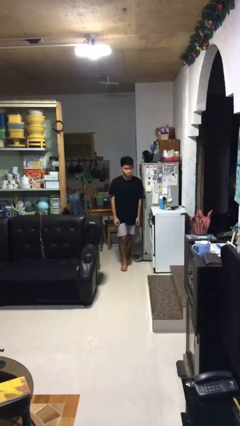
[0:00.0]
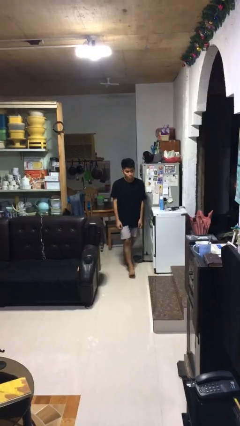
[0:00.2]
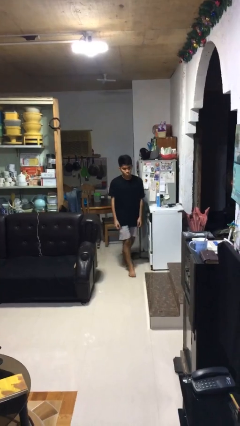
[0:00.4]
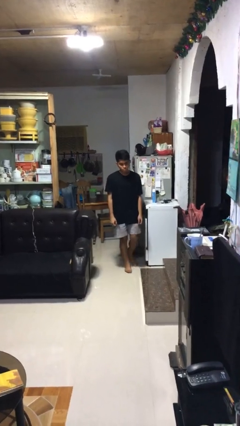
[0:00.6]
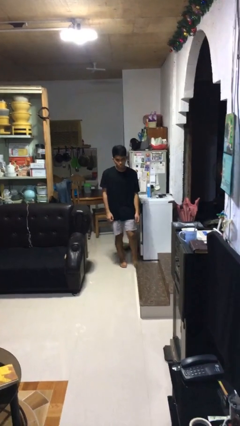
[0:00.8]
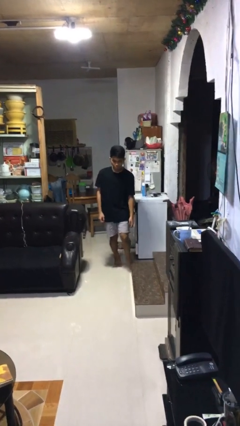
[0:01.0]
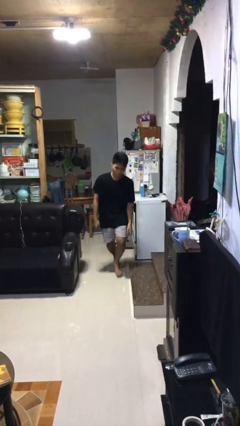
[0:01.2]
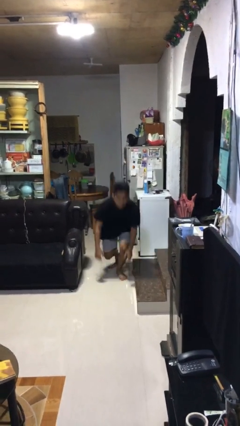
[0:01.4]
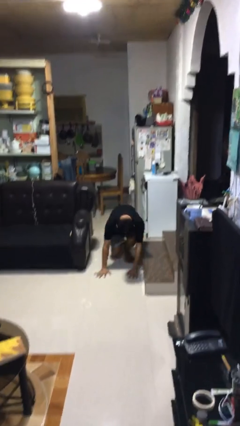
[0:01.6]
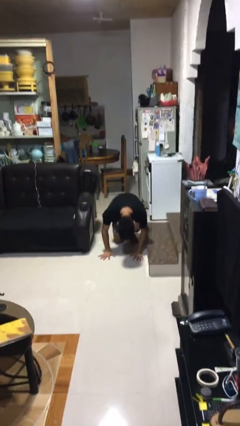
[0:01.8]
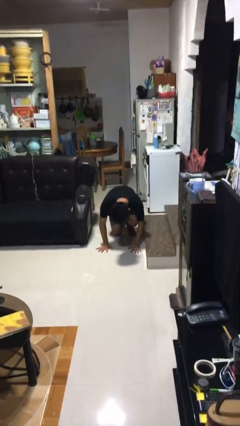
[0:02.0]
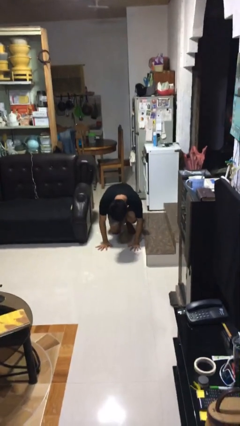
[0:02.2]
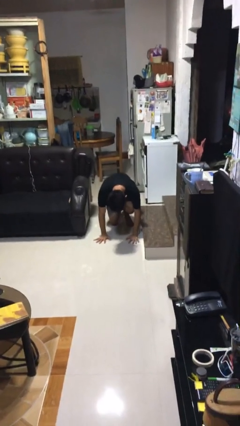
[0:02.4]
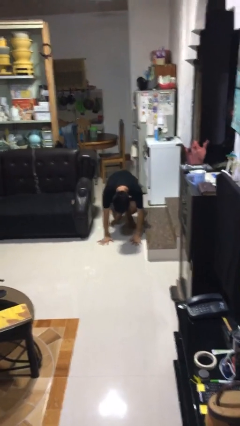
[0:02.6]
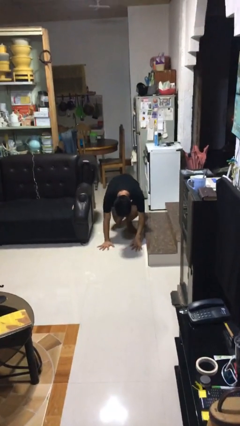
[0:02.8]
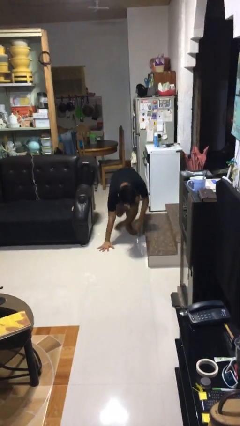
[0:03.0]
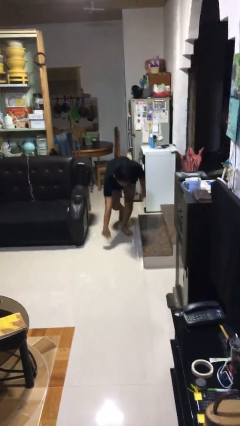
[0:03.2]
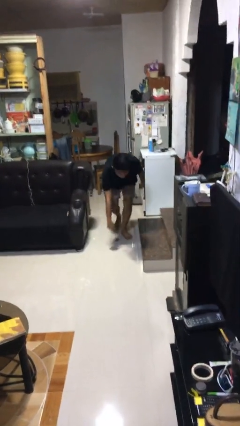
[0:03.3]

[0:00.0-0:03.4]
person trips on object on floor

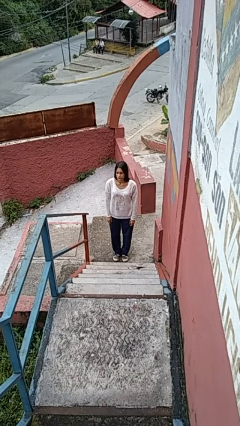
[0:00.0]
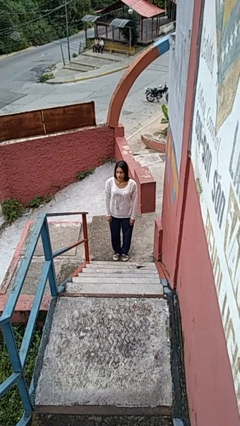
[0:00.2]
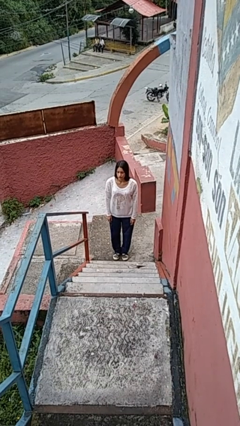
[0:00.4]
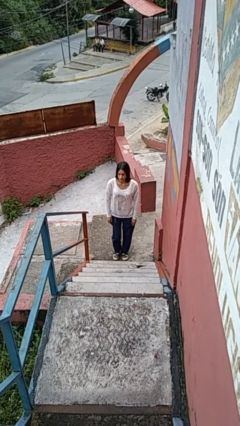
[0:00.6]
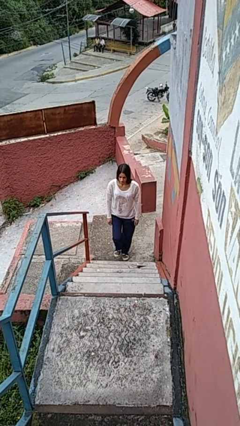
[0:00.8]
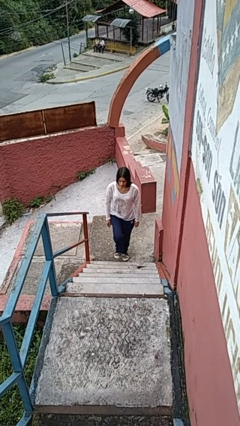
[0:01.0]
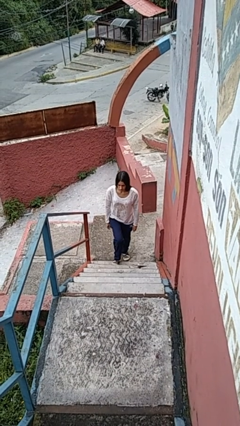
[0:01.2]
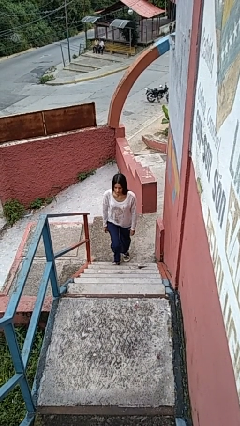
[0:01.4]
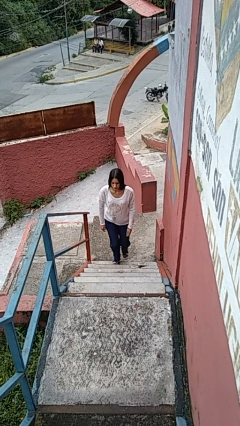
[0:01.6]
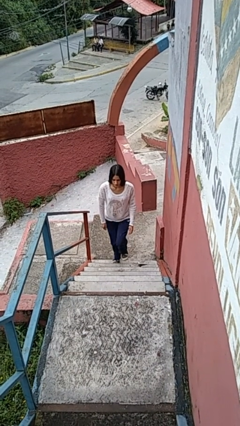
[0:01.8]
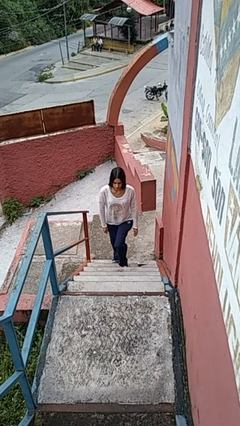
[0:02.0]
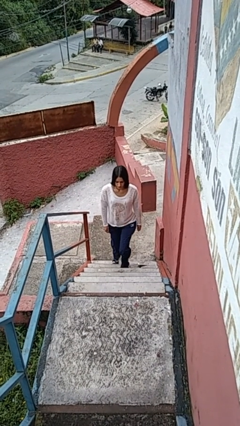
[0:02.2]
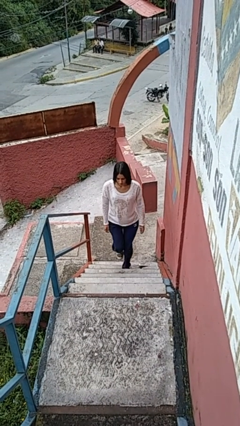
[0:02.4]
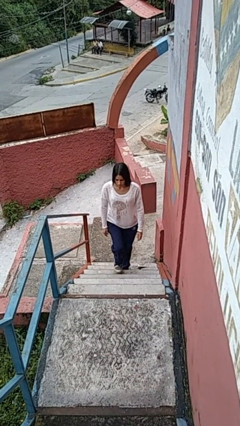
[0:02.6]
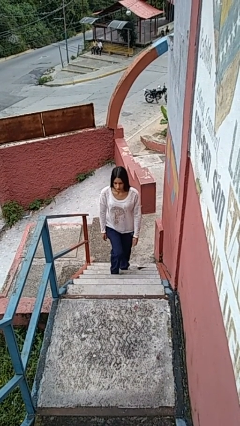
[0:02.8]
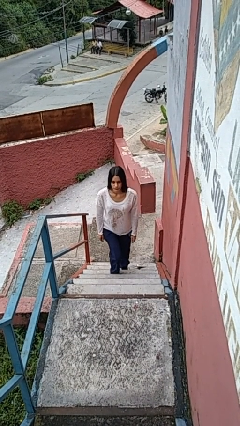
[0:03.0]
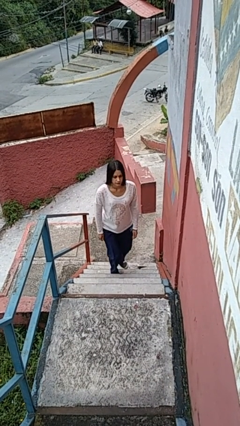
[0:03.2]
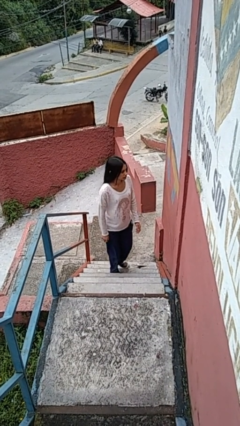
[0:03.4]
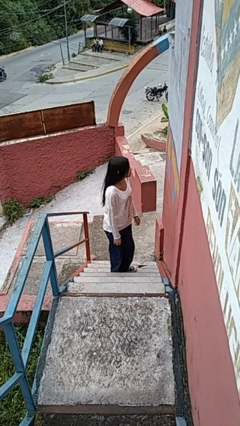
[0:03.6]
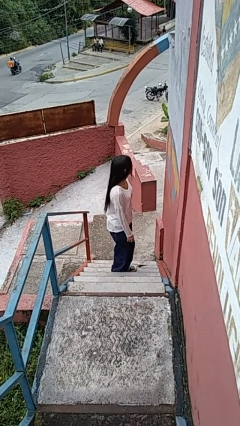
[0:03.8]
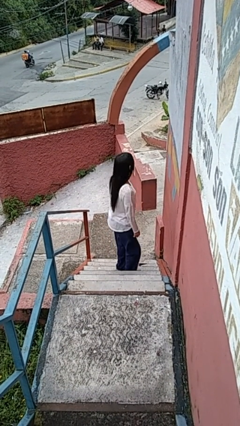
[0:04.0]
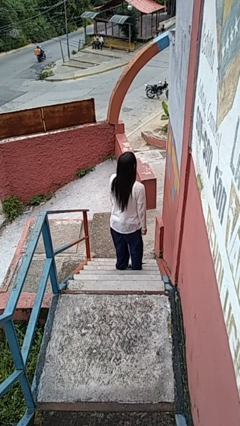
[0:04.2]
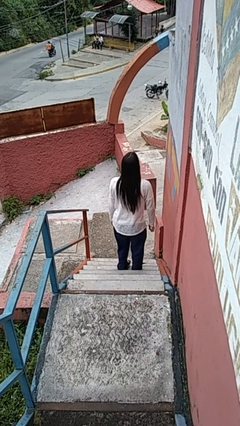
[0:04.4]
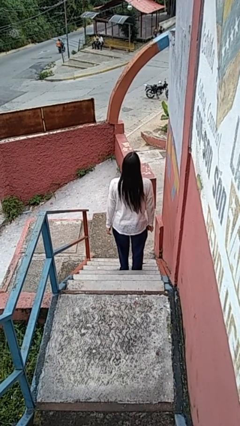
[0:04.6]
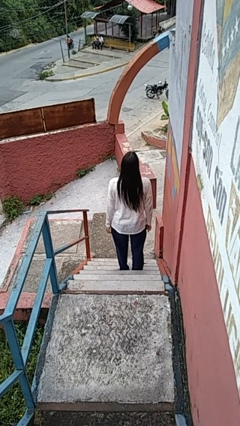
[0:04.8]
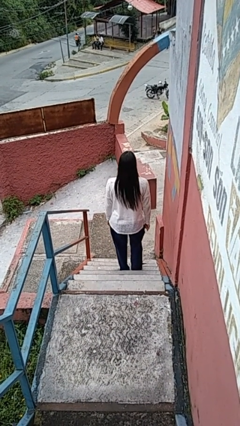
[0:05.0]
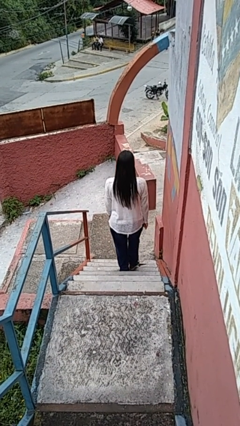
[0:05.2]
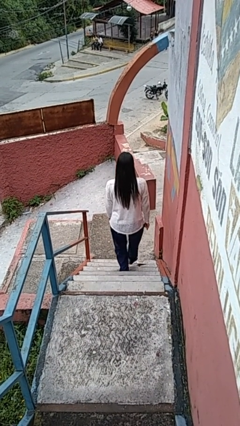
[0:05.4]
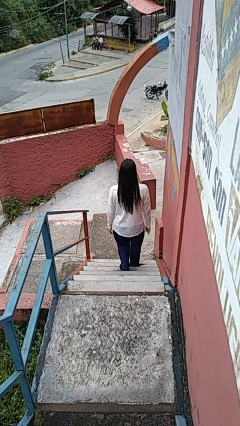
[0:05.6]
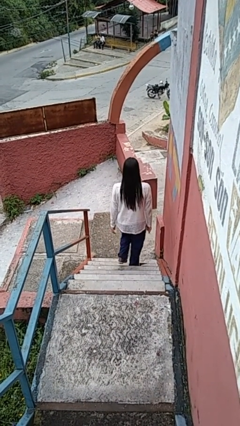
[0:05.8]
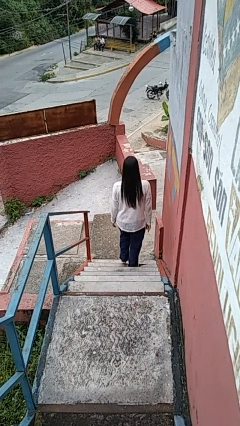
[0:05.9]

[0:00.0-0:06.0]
person climbs up stairs

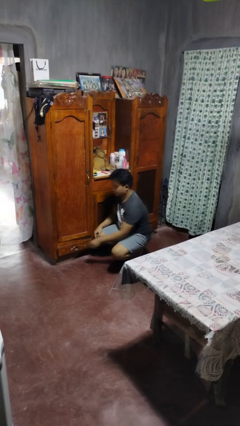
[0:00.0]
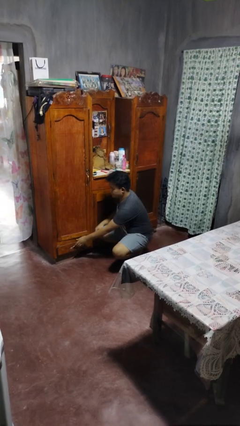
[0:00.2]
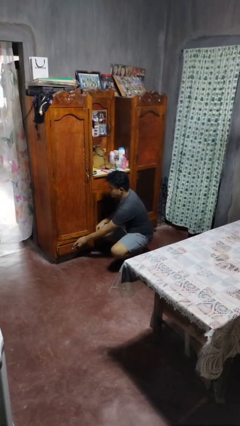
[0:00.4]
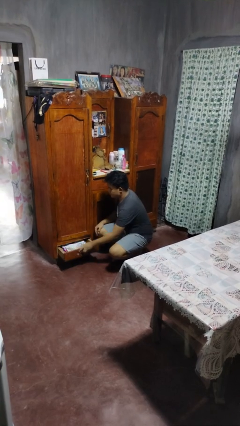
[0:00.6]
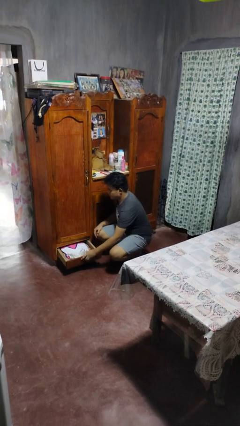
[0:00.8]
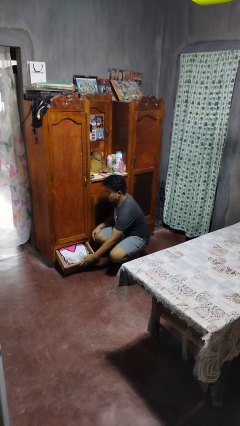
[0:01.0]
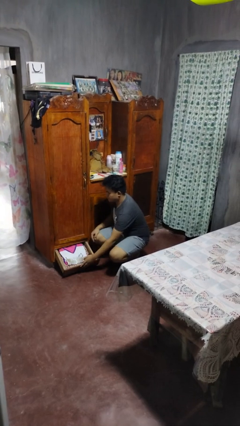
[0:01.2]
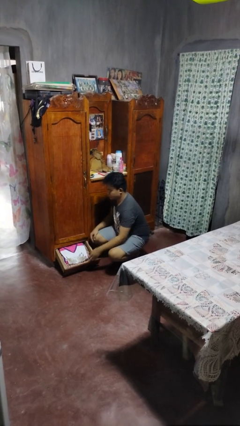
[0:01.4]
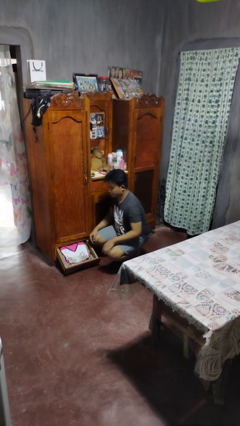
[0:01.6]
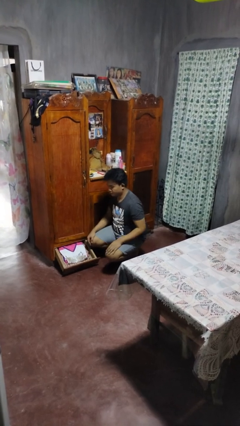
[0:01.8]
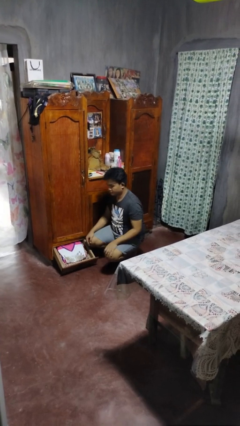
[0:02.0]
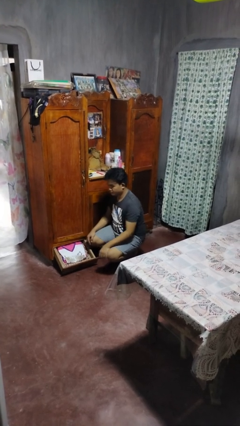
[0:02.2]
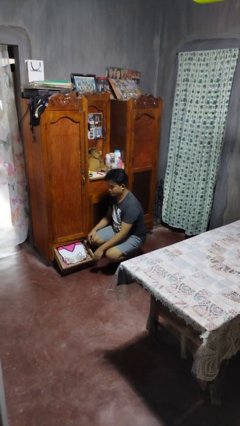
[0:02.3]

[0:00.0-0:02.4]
person opens dresser drawer

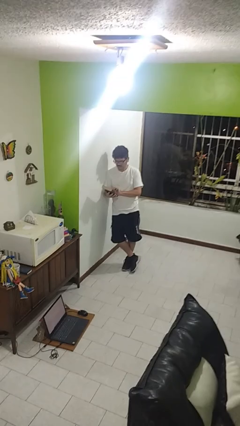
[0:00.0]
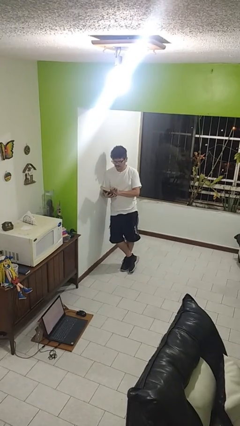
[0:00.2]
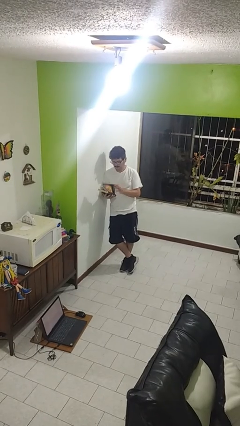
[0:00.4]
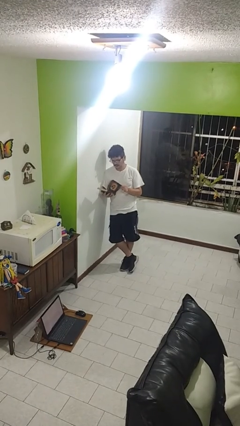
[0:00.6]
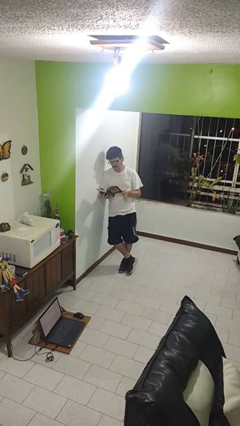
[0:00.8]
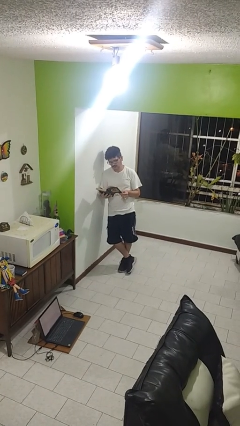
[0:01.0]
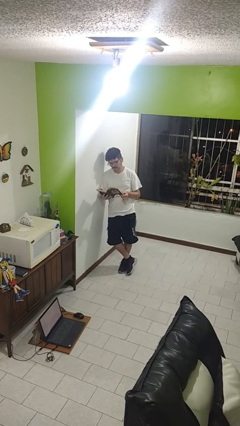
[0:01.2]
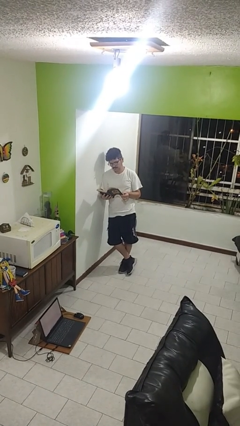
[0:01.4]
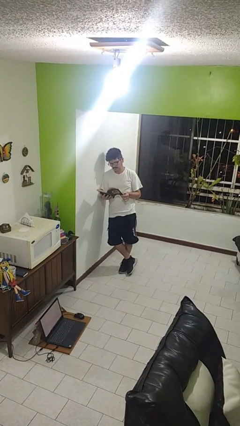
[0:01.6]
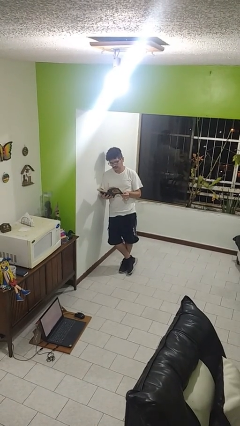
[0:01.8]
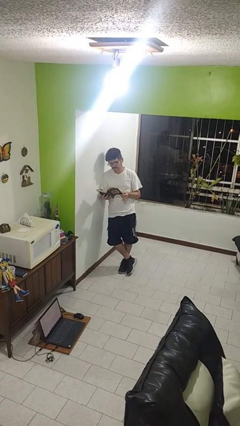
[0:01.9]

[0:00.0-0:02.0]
person reads book

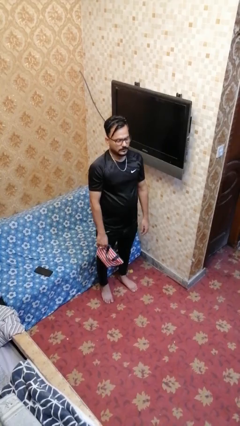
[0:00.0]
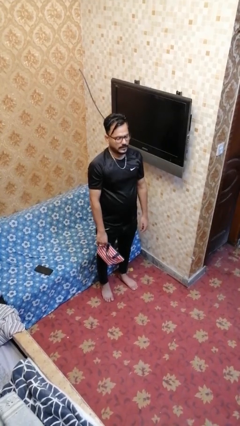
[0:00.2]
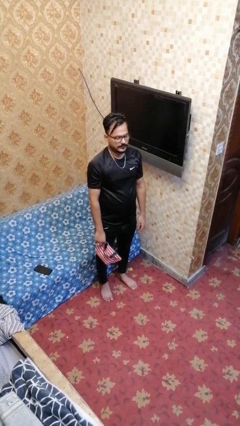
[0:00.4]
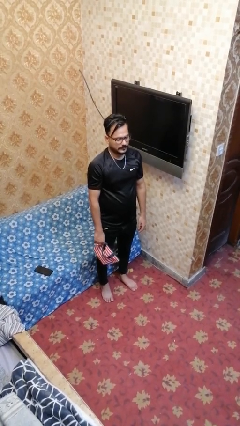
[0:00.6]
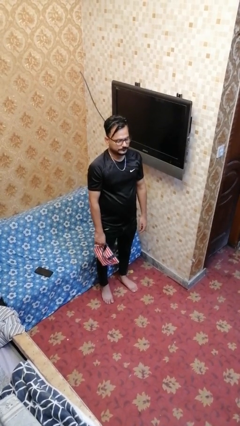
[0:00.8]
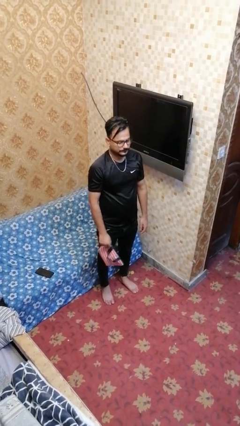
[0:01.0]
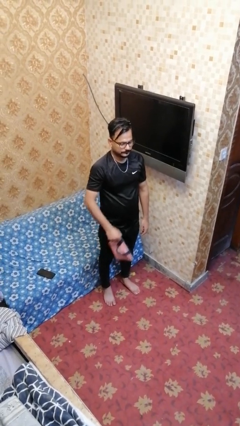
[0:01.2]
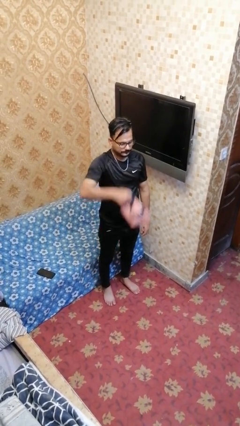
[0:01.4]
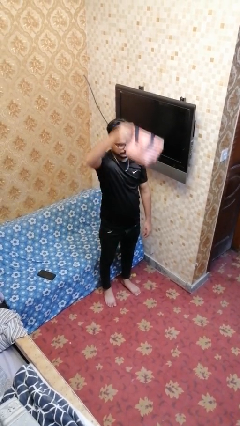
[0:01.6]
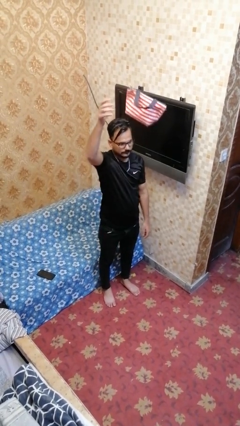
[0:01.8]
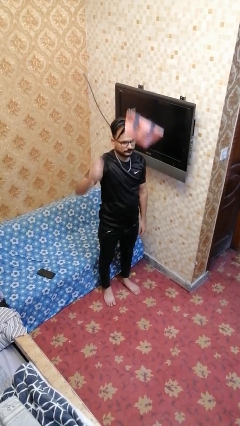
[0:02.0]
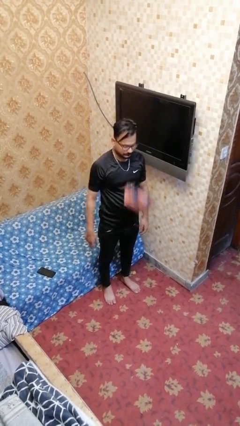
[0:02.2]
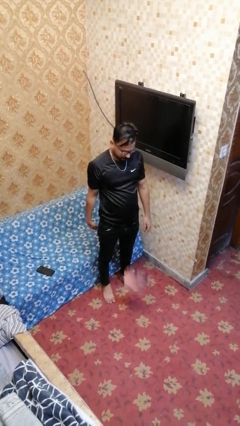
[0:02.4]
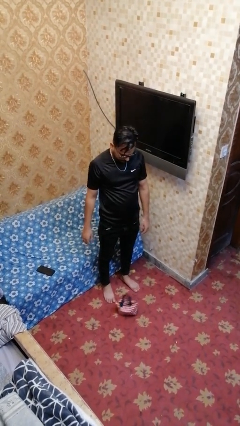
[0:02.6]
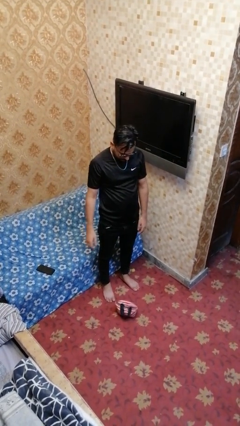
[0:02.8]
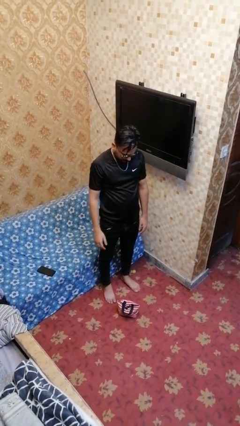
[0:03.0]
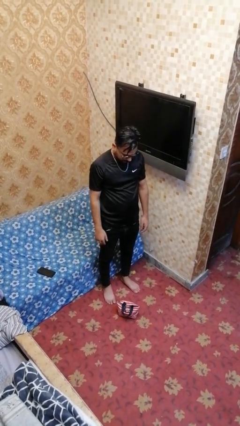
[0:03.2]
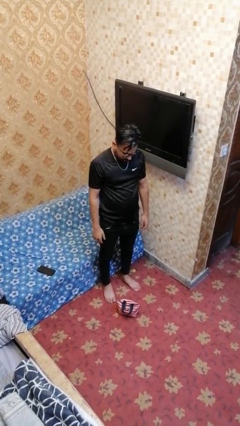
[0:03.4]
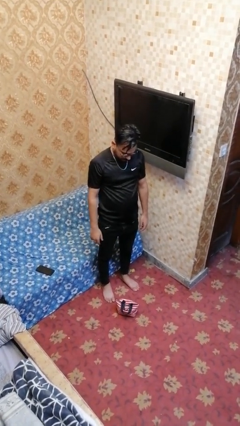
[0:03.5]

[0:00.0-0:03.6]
person throws object into air
